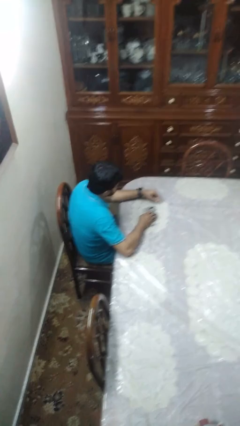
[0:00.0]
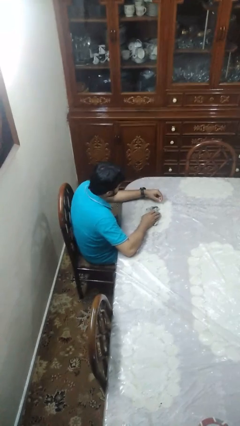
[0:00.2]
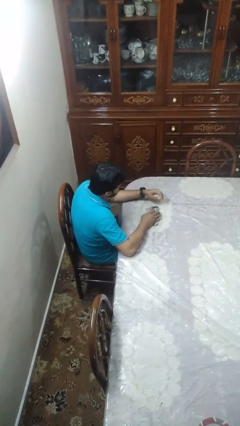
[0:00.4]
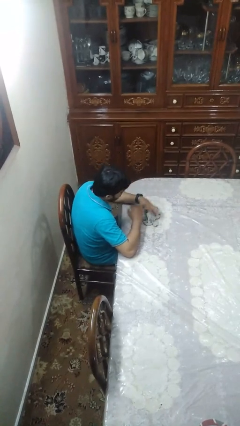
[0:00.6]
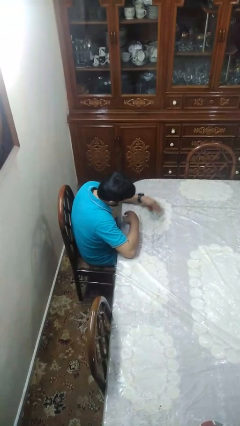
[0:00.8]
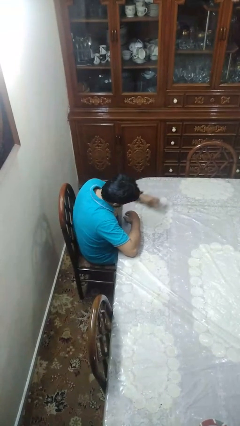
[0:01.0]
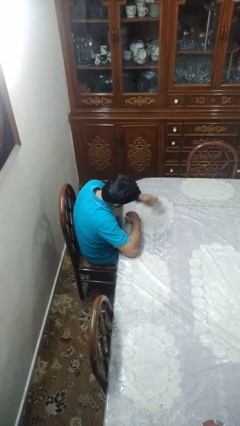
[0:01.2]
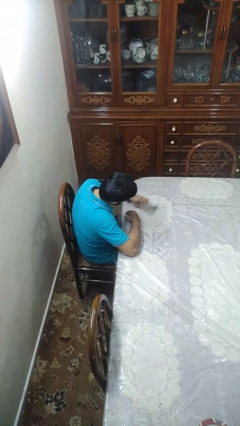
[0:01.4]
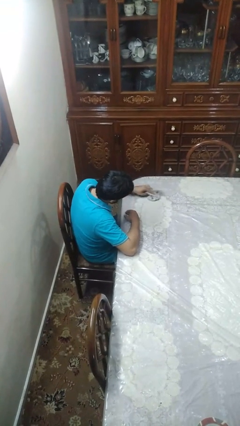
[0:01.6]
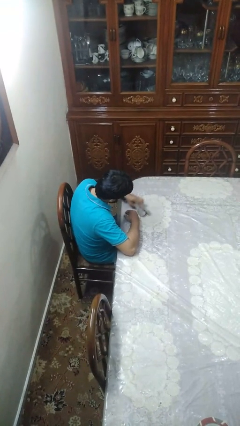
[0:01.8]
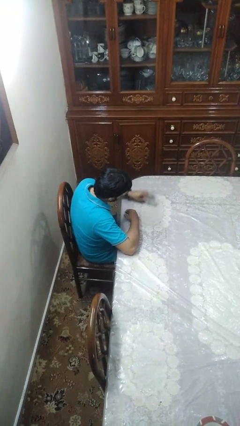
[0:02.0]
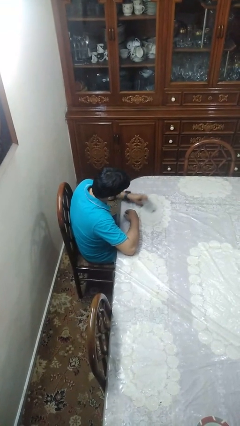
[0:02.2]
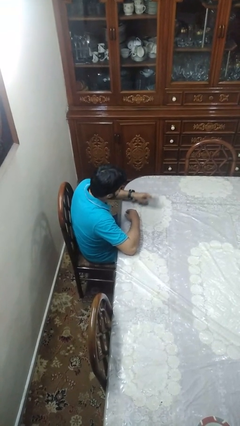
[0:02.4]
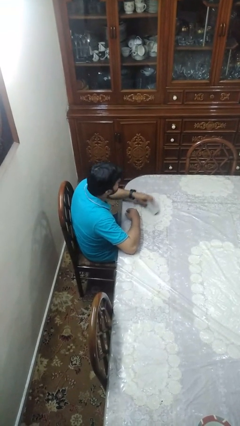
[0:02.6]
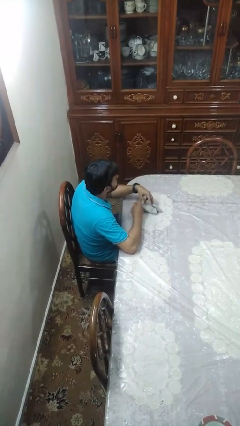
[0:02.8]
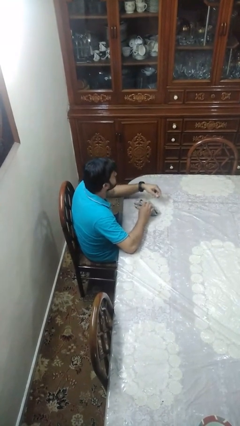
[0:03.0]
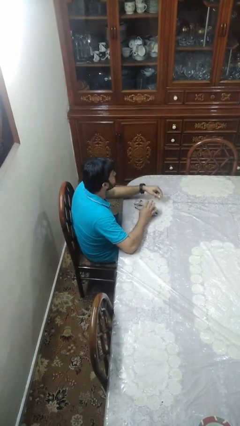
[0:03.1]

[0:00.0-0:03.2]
person cleans table with rag

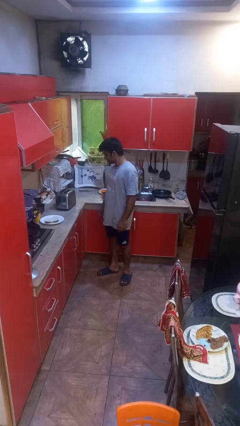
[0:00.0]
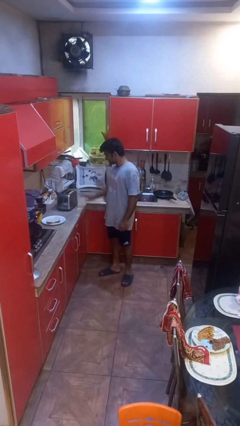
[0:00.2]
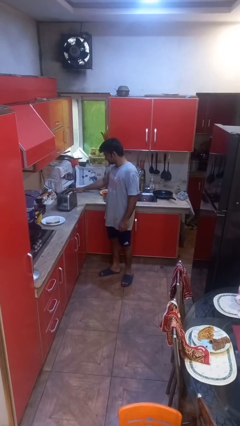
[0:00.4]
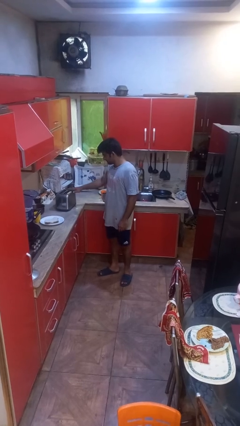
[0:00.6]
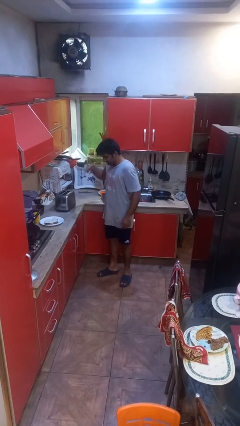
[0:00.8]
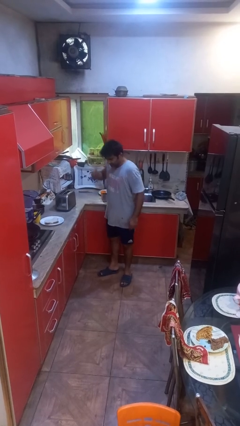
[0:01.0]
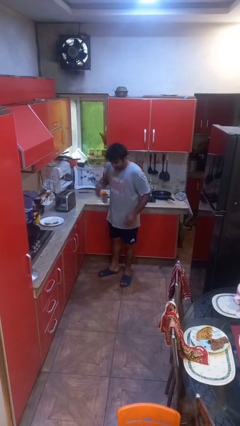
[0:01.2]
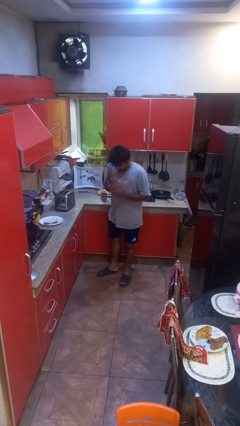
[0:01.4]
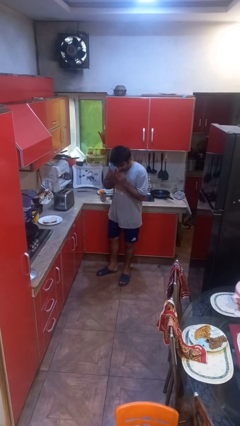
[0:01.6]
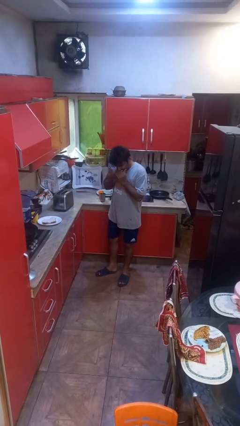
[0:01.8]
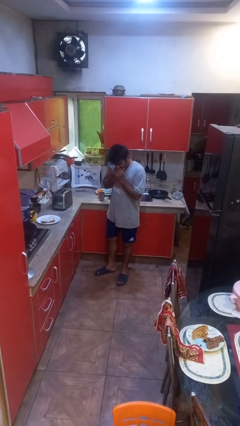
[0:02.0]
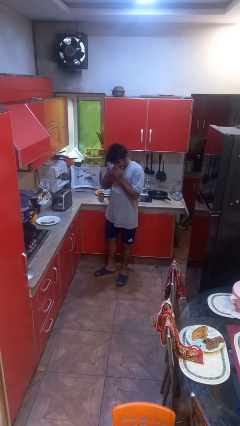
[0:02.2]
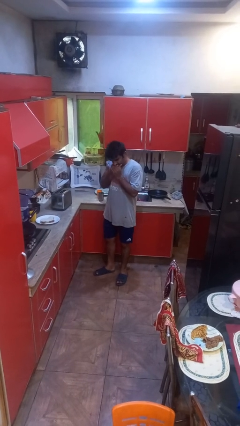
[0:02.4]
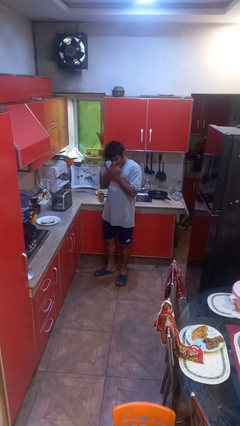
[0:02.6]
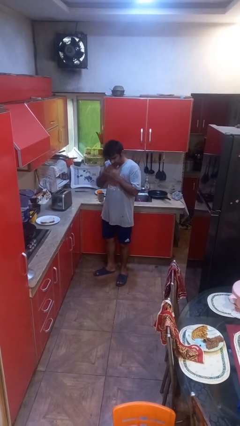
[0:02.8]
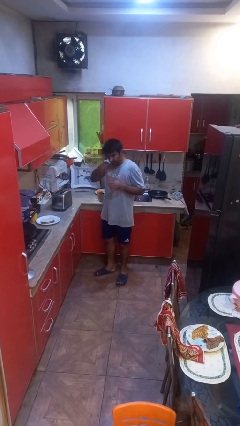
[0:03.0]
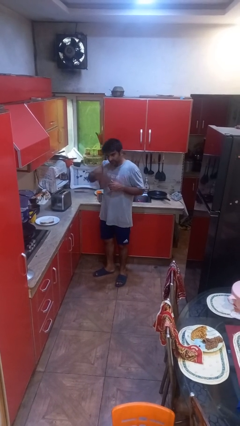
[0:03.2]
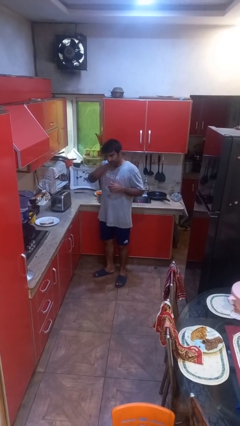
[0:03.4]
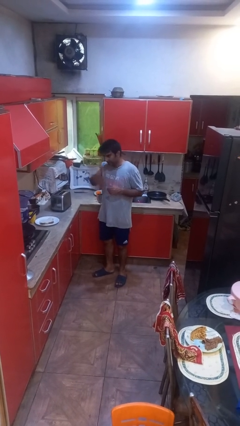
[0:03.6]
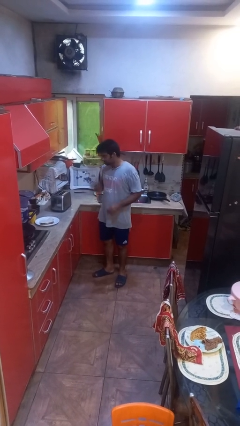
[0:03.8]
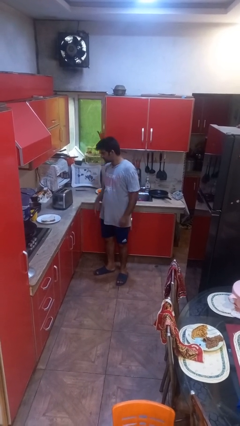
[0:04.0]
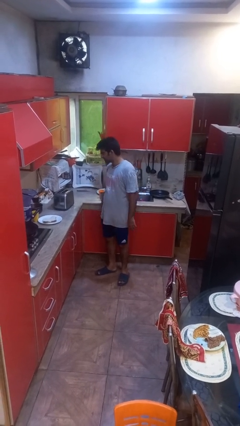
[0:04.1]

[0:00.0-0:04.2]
person burns hand

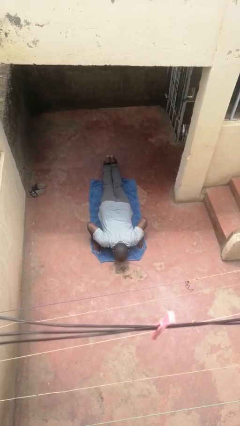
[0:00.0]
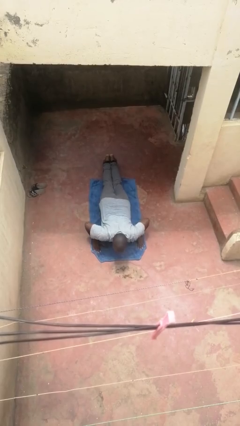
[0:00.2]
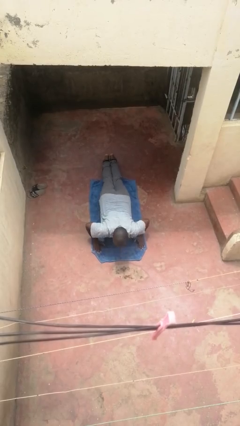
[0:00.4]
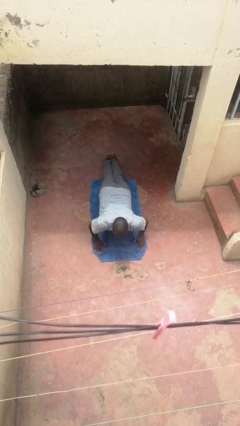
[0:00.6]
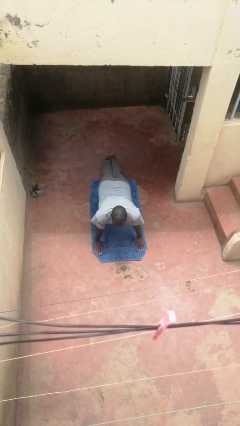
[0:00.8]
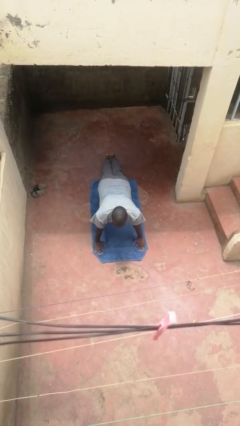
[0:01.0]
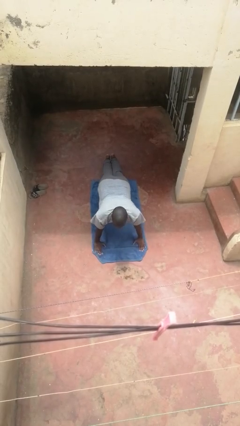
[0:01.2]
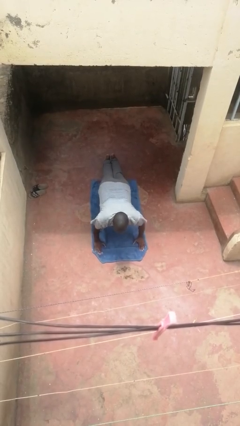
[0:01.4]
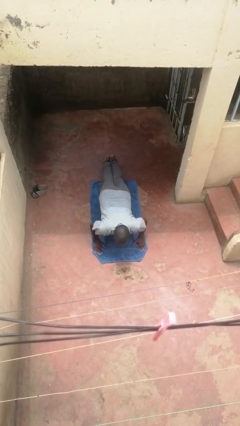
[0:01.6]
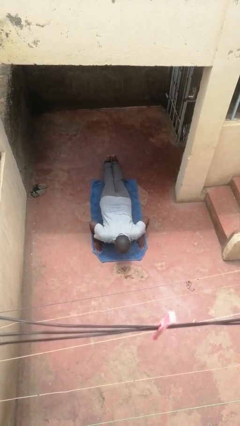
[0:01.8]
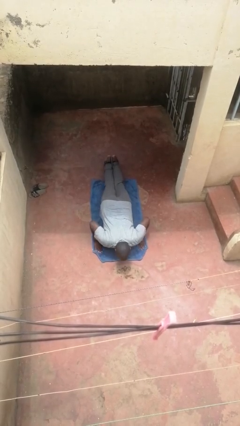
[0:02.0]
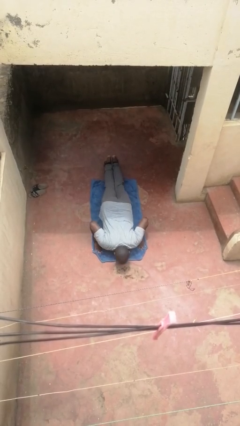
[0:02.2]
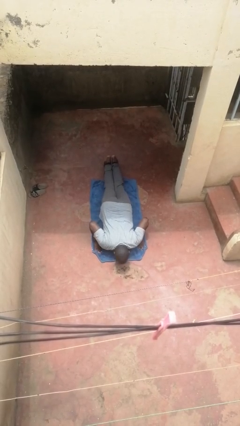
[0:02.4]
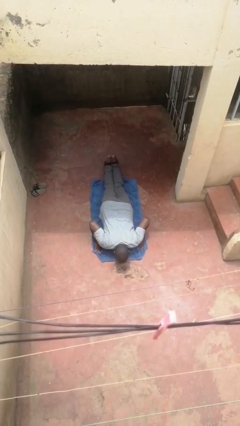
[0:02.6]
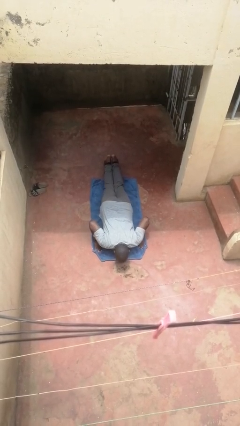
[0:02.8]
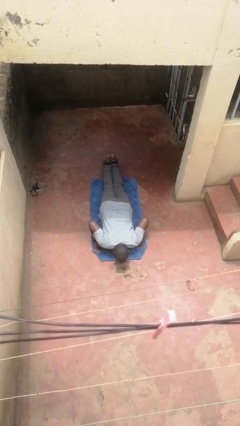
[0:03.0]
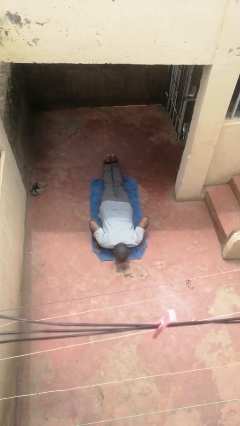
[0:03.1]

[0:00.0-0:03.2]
person exercises with pushup

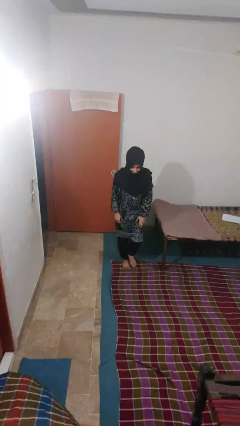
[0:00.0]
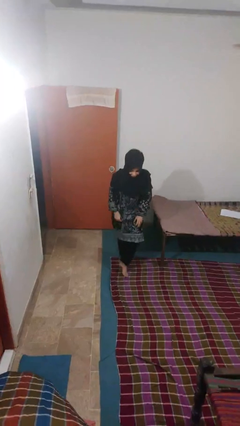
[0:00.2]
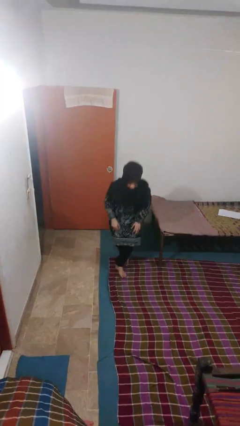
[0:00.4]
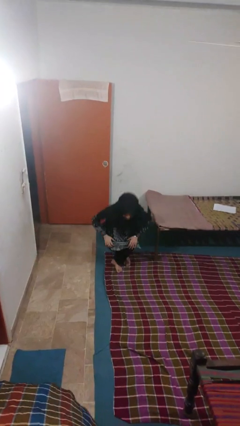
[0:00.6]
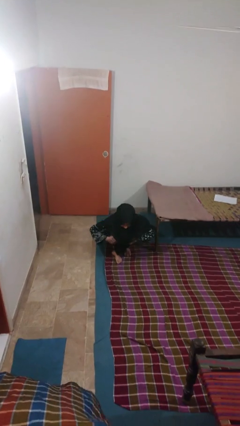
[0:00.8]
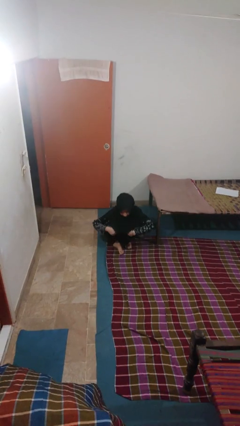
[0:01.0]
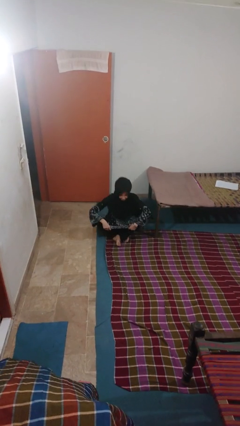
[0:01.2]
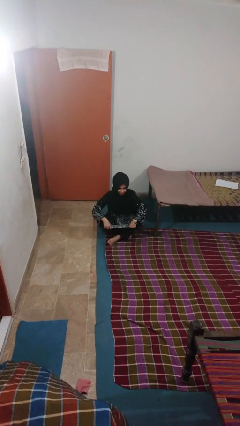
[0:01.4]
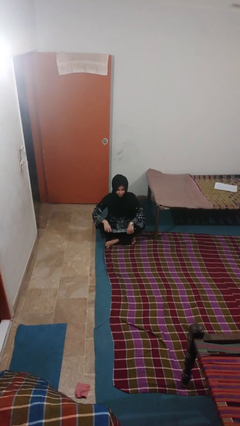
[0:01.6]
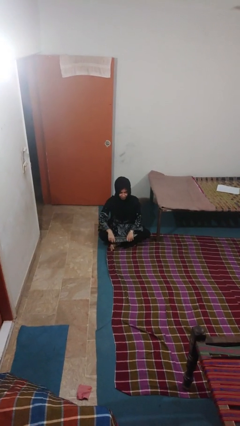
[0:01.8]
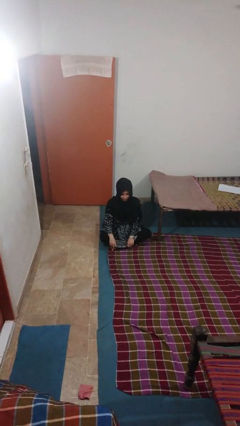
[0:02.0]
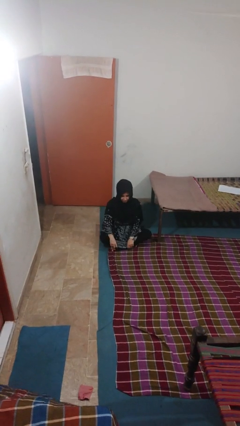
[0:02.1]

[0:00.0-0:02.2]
person sits crisscross

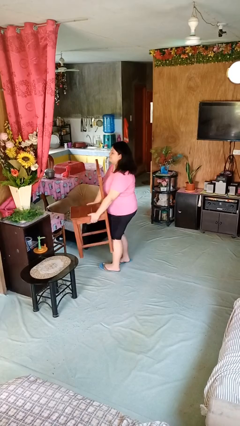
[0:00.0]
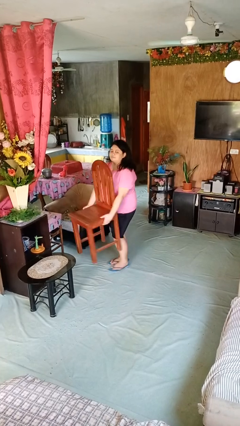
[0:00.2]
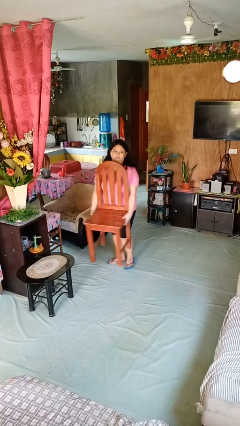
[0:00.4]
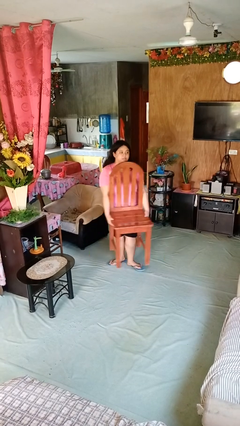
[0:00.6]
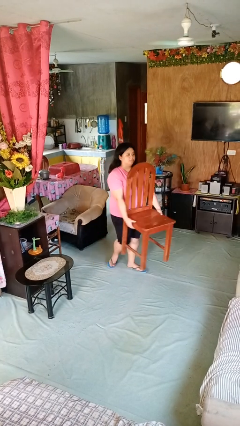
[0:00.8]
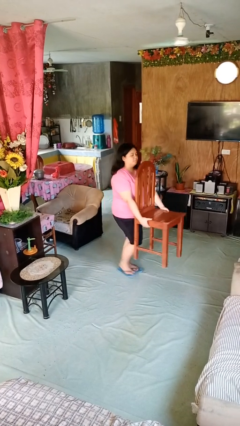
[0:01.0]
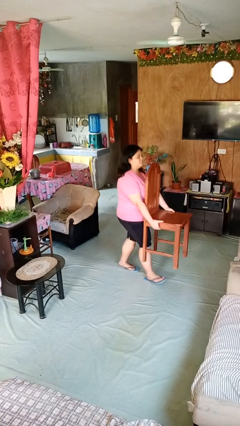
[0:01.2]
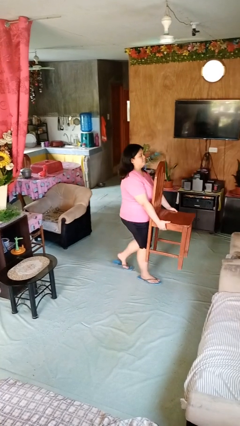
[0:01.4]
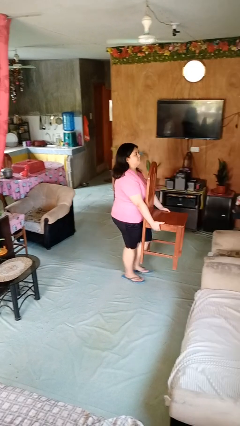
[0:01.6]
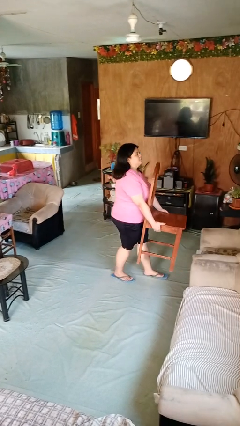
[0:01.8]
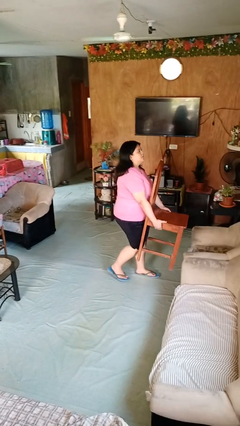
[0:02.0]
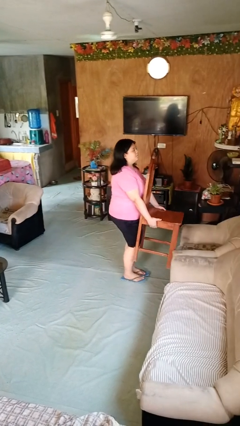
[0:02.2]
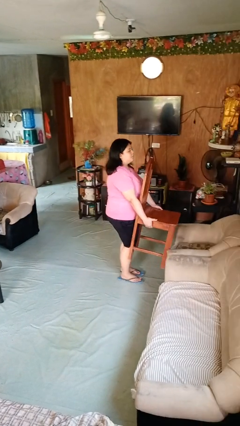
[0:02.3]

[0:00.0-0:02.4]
person carries furniture

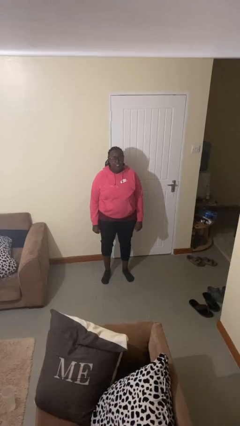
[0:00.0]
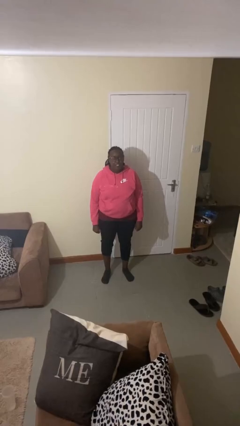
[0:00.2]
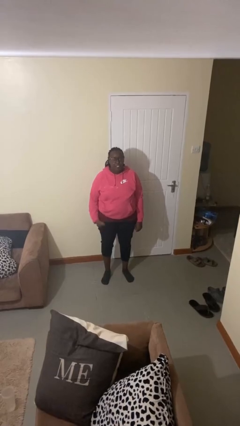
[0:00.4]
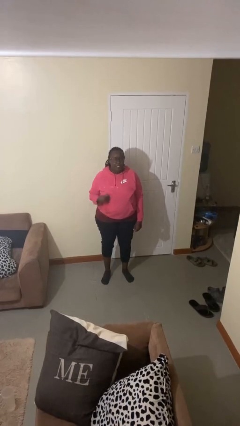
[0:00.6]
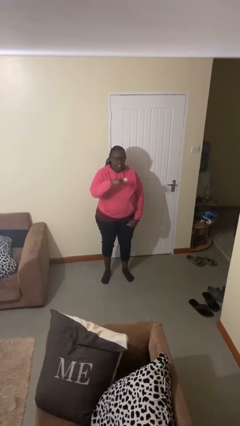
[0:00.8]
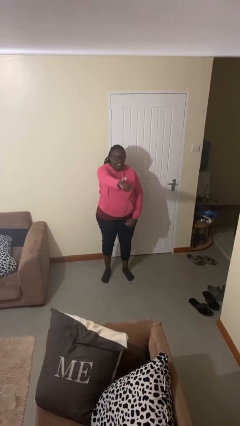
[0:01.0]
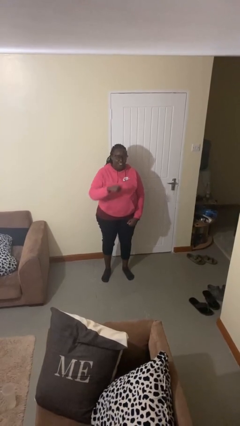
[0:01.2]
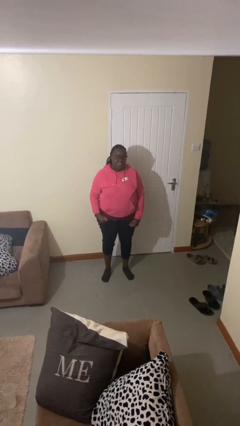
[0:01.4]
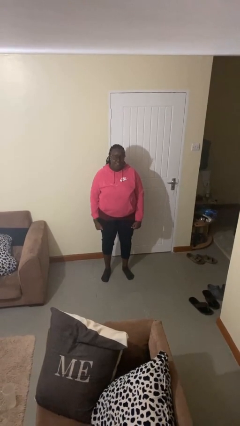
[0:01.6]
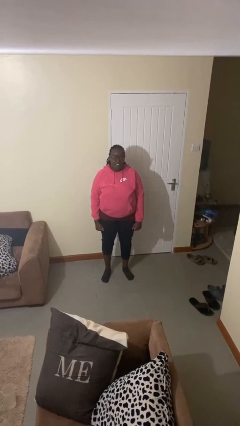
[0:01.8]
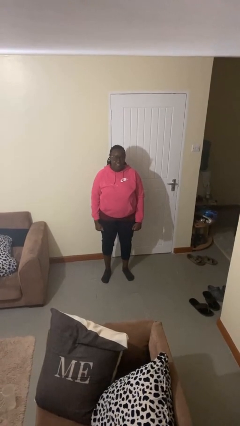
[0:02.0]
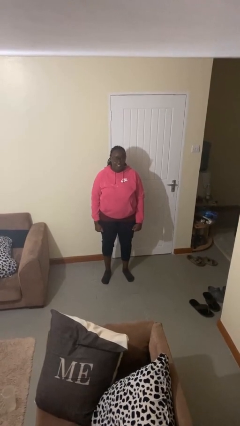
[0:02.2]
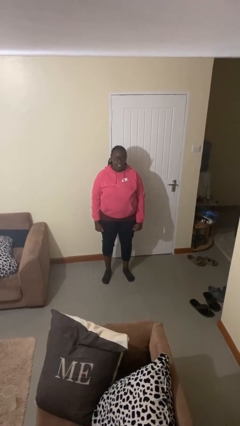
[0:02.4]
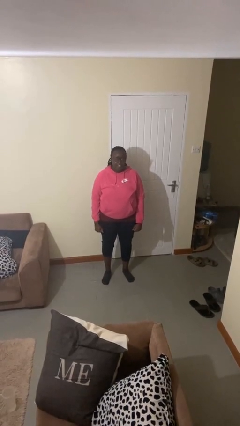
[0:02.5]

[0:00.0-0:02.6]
person punches
